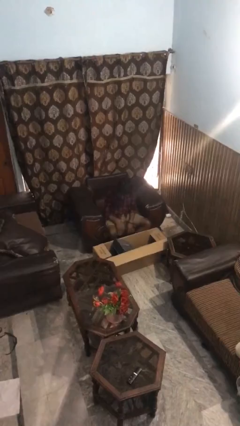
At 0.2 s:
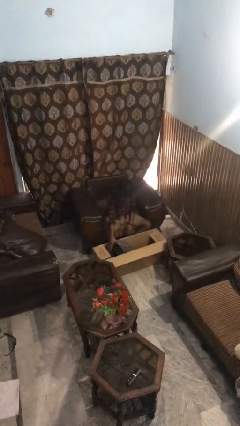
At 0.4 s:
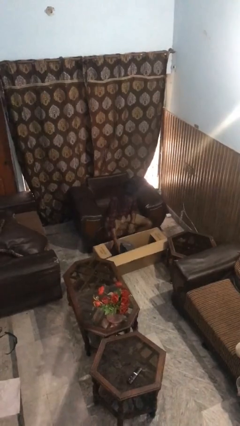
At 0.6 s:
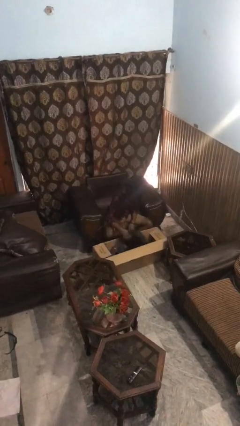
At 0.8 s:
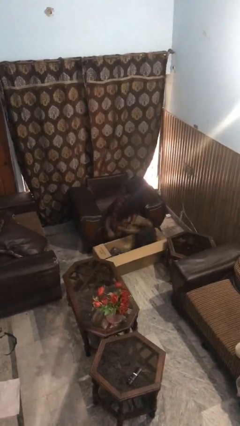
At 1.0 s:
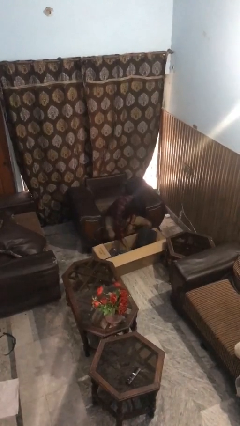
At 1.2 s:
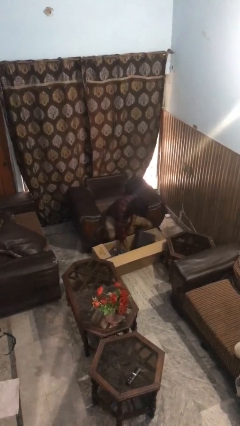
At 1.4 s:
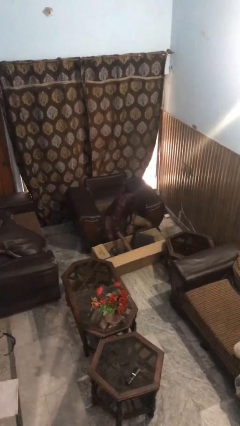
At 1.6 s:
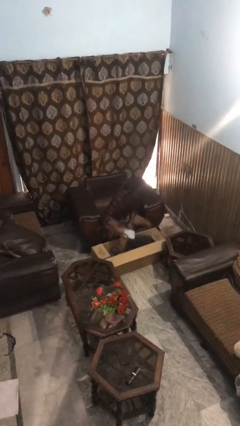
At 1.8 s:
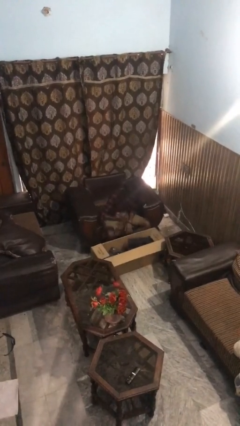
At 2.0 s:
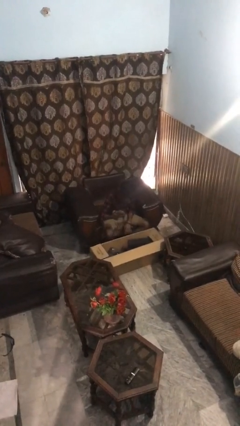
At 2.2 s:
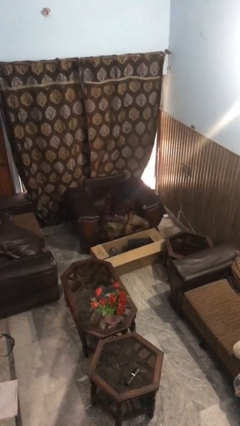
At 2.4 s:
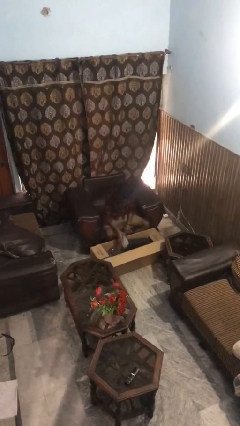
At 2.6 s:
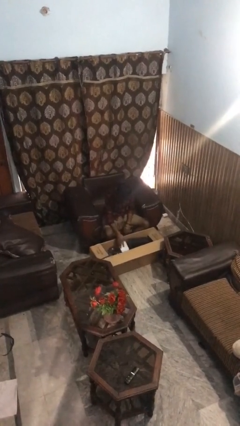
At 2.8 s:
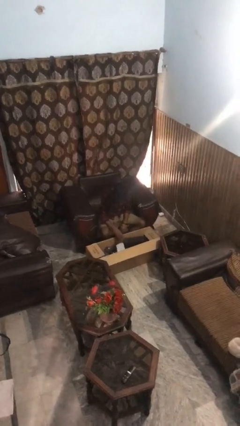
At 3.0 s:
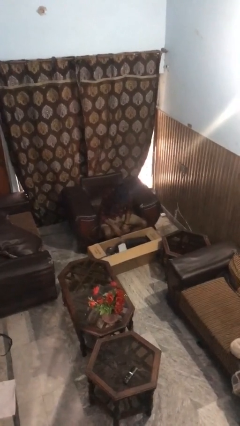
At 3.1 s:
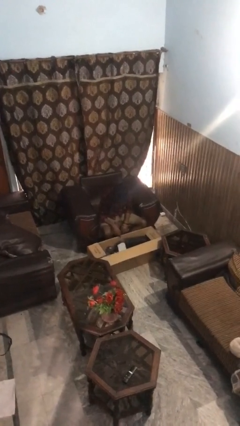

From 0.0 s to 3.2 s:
person searches in box

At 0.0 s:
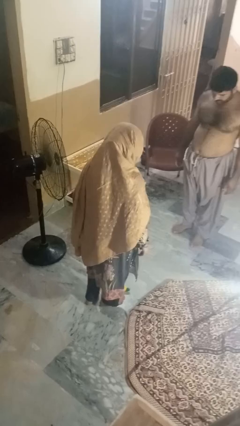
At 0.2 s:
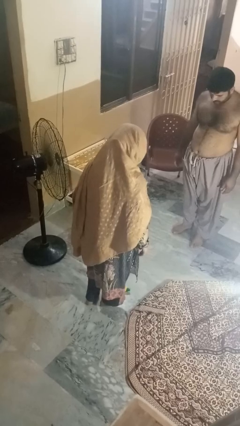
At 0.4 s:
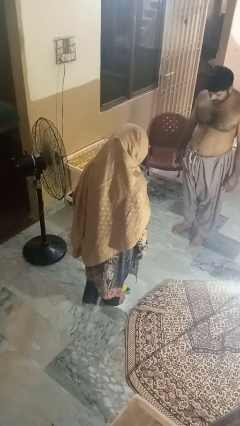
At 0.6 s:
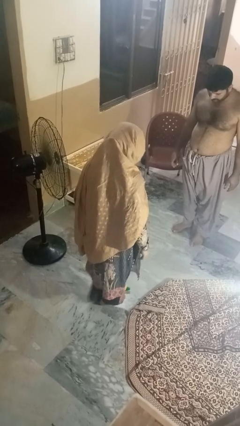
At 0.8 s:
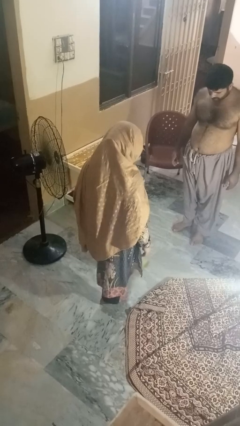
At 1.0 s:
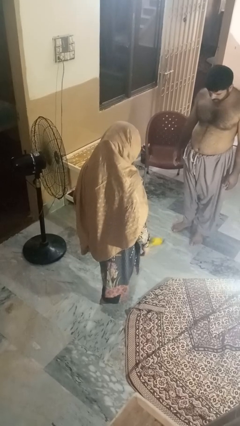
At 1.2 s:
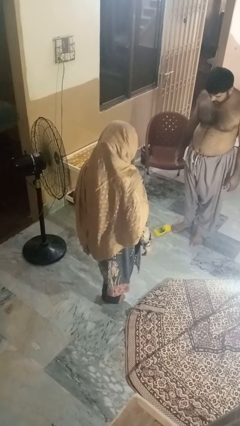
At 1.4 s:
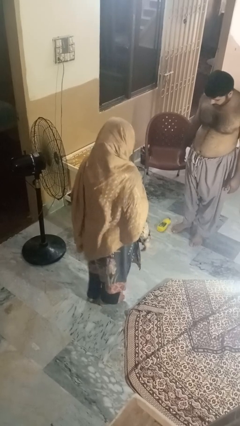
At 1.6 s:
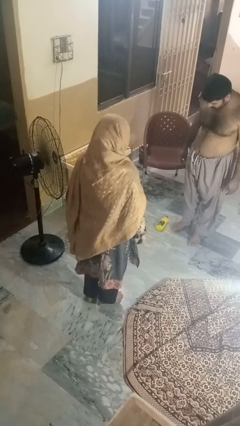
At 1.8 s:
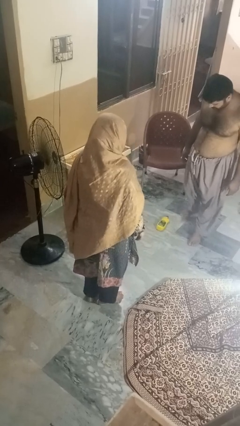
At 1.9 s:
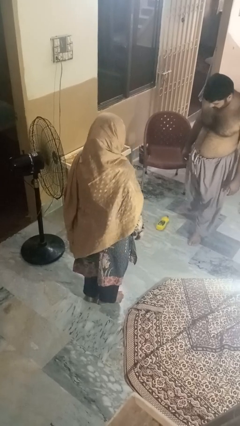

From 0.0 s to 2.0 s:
person kicks object to person

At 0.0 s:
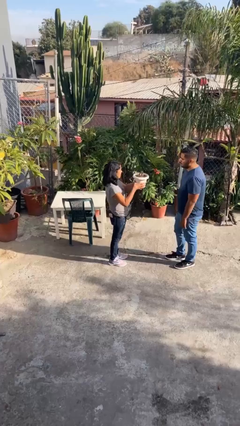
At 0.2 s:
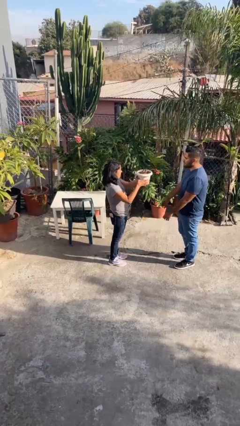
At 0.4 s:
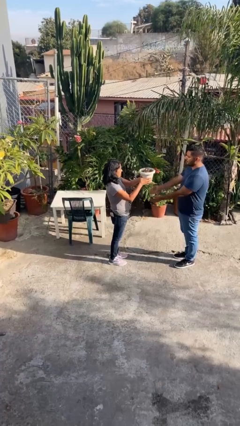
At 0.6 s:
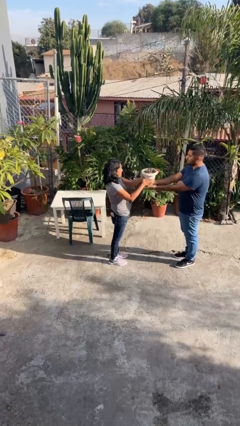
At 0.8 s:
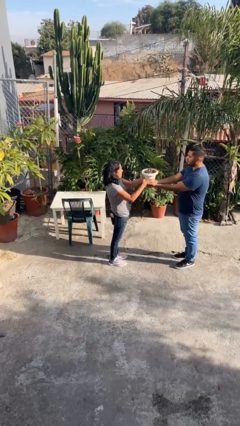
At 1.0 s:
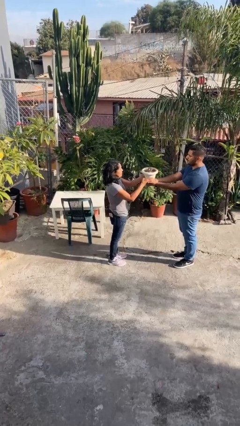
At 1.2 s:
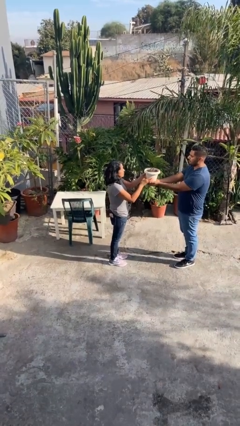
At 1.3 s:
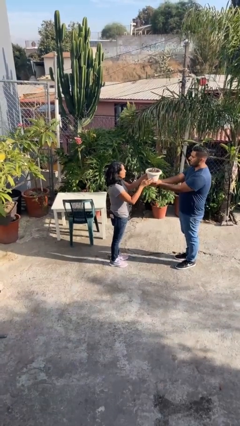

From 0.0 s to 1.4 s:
person transfers object to person

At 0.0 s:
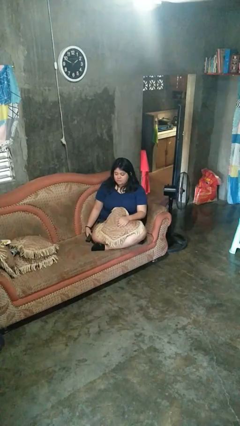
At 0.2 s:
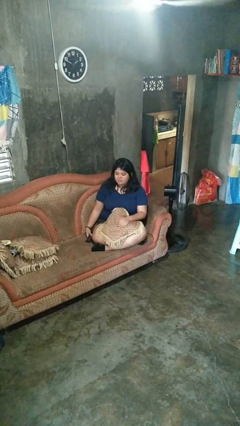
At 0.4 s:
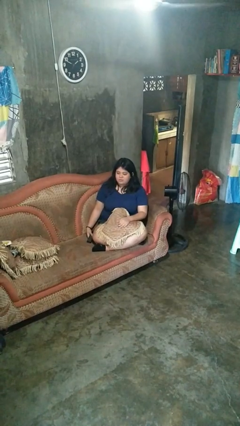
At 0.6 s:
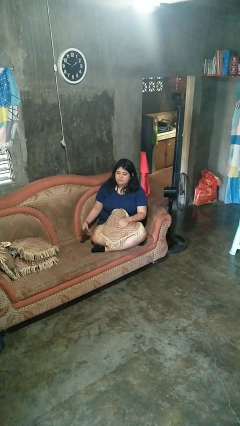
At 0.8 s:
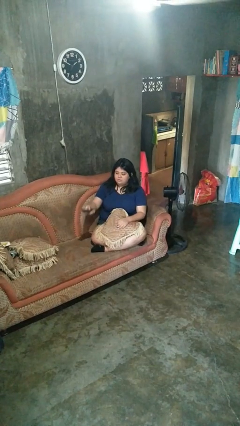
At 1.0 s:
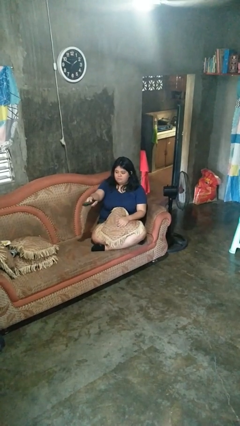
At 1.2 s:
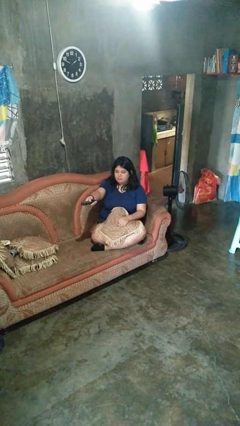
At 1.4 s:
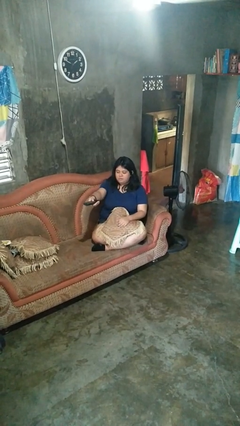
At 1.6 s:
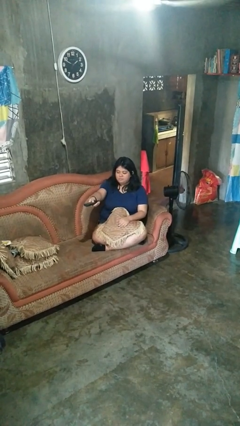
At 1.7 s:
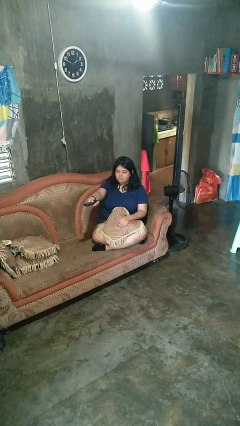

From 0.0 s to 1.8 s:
person uses television remote

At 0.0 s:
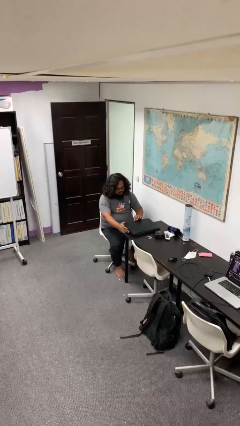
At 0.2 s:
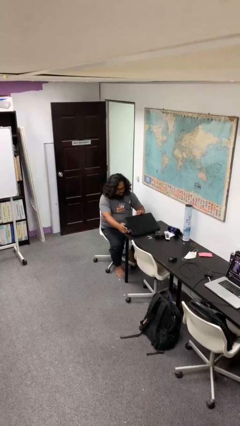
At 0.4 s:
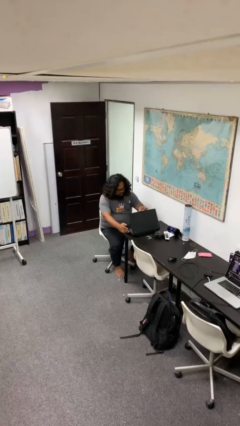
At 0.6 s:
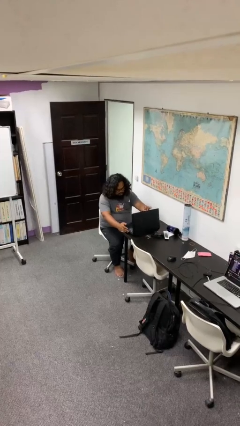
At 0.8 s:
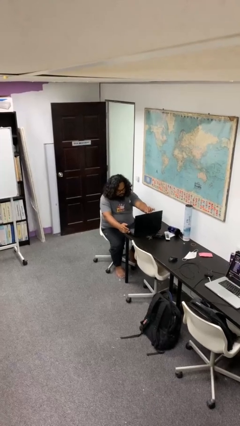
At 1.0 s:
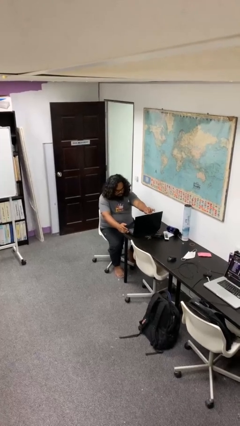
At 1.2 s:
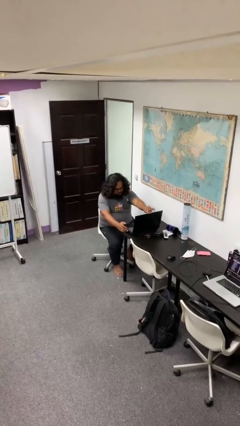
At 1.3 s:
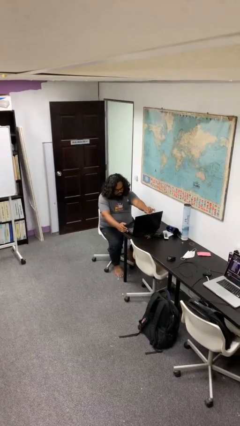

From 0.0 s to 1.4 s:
person opens laptop

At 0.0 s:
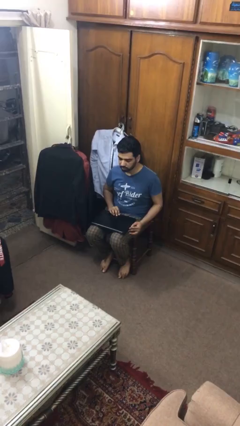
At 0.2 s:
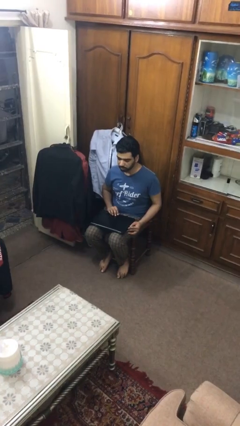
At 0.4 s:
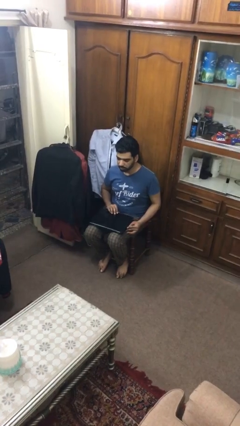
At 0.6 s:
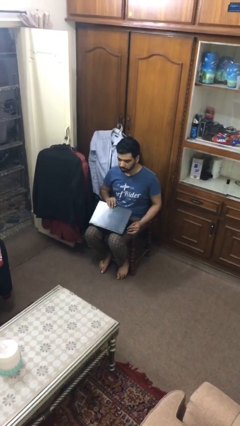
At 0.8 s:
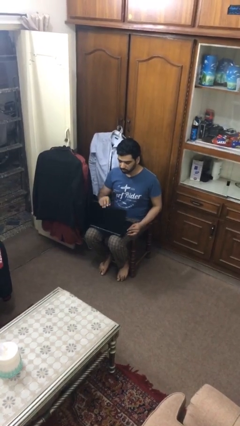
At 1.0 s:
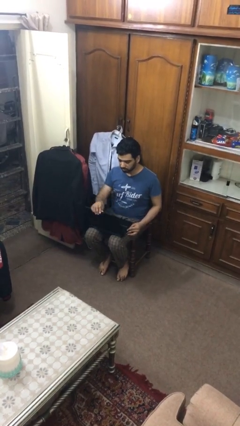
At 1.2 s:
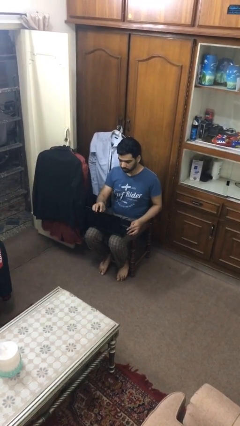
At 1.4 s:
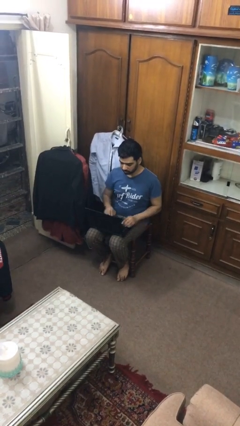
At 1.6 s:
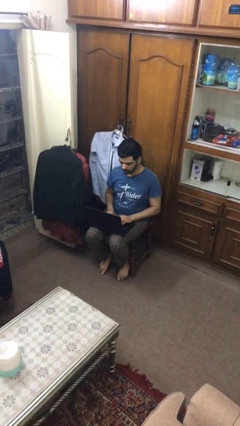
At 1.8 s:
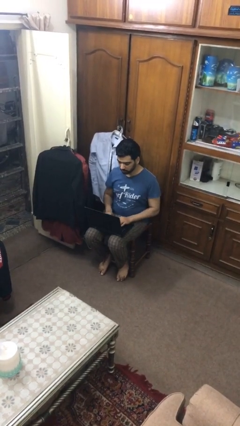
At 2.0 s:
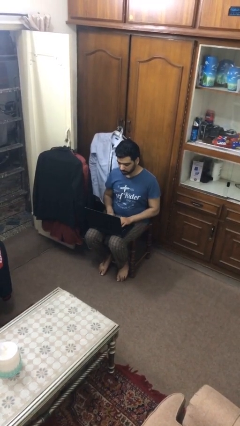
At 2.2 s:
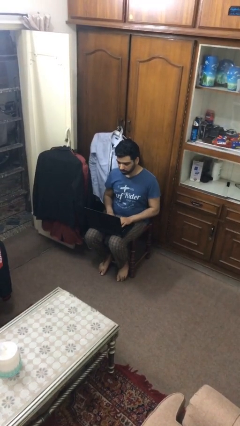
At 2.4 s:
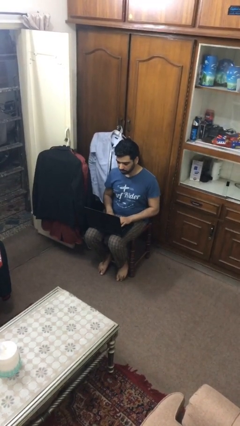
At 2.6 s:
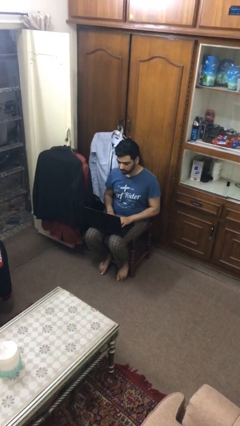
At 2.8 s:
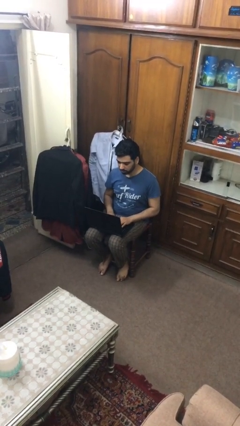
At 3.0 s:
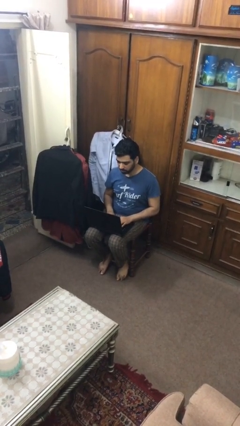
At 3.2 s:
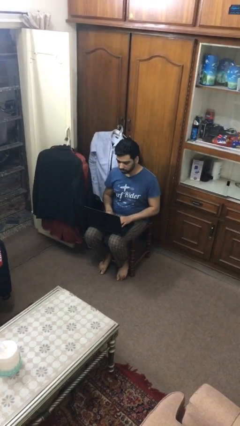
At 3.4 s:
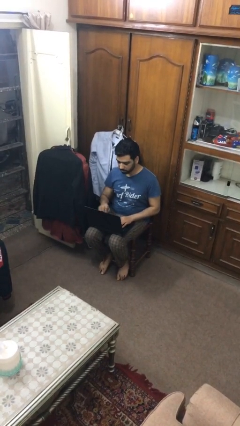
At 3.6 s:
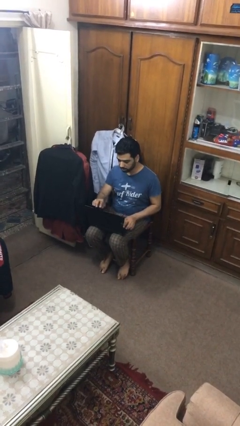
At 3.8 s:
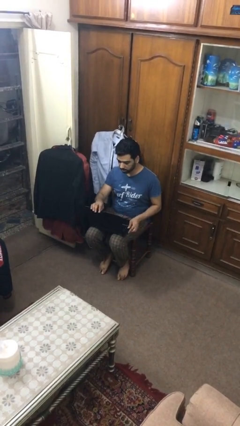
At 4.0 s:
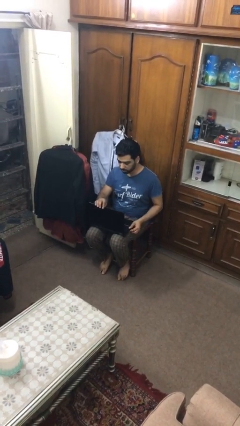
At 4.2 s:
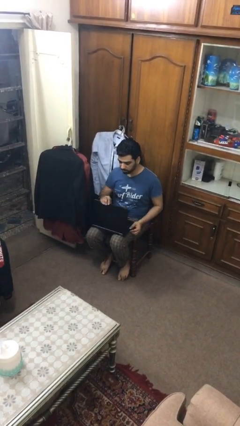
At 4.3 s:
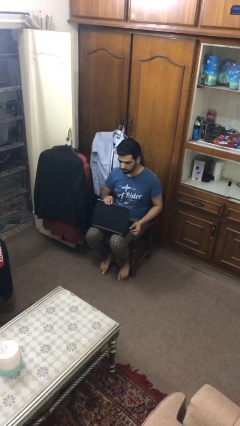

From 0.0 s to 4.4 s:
person interacts with laptop

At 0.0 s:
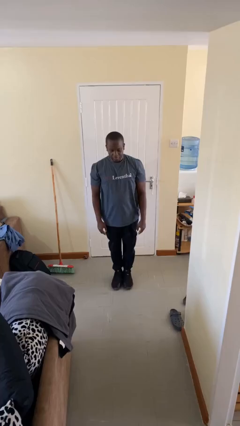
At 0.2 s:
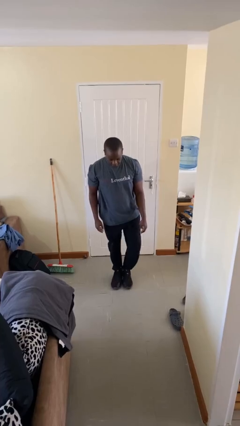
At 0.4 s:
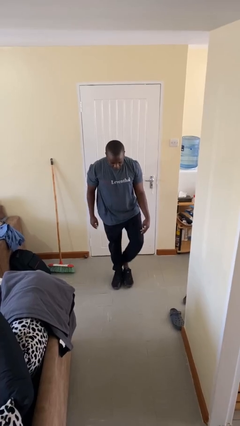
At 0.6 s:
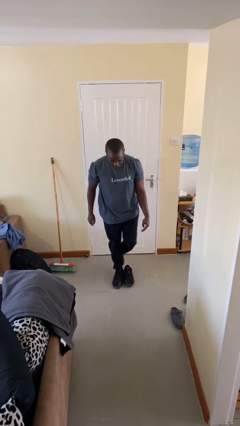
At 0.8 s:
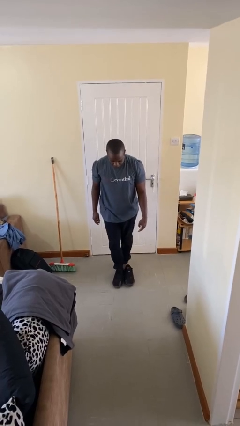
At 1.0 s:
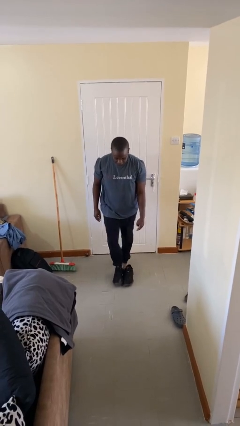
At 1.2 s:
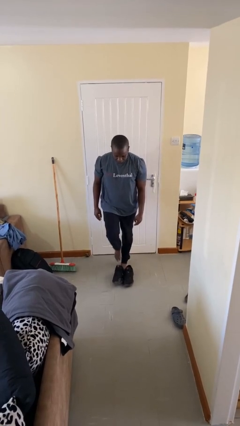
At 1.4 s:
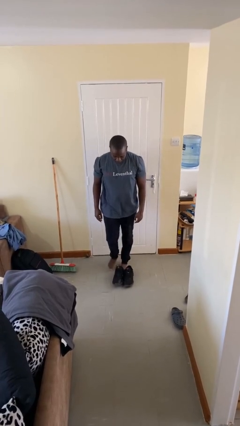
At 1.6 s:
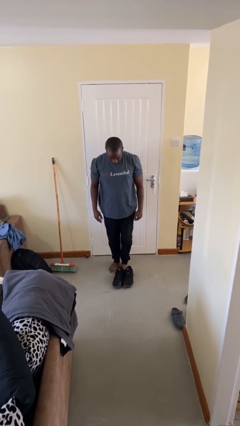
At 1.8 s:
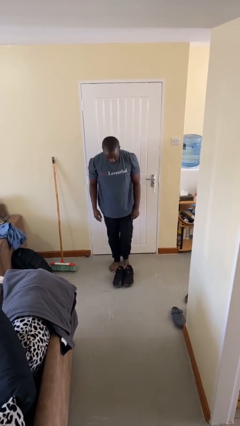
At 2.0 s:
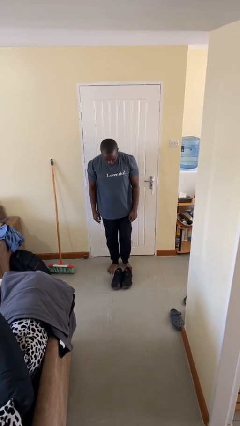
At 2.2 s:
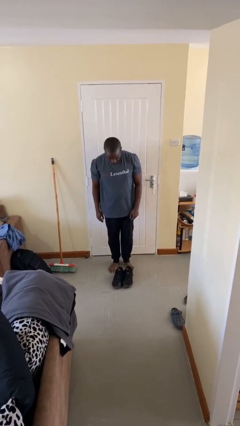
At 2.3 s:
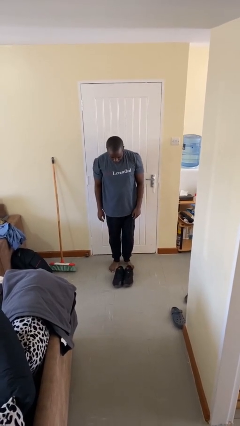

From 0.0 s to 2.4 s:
person takes off shoes

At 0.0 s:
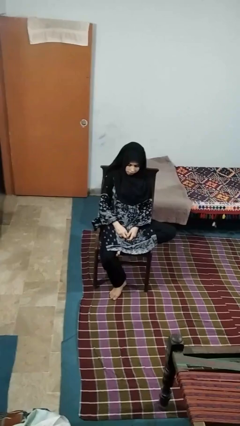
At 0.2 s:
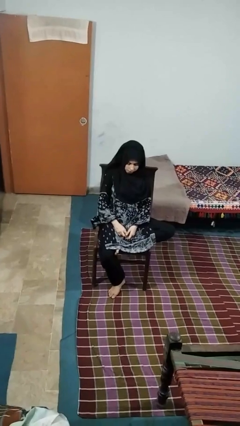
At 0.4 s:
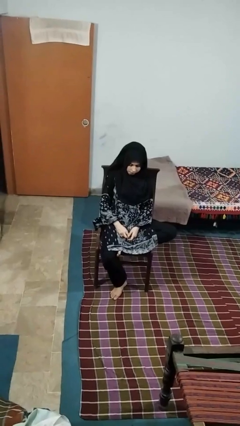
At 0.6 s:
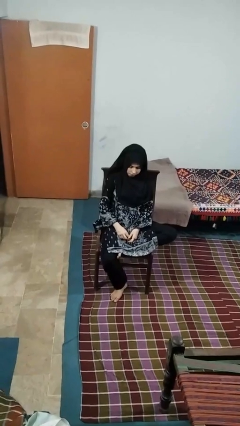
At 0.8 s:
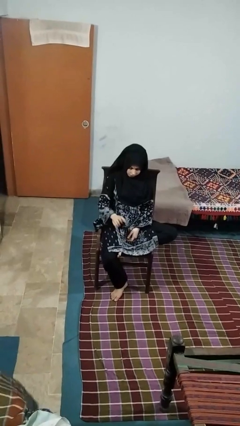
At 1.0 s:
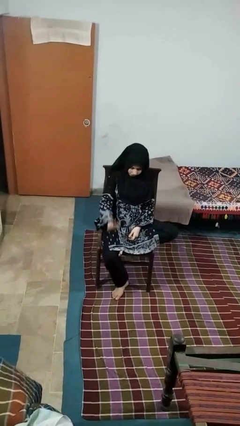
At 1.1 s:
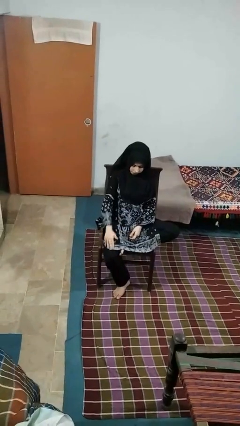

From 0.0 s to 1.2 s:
person swats bug
